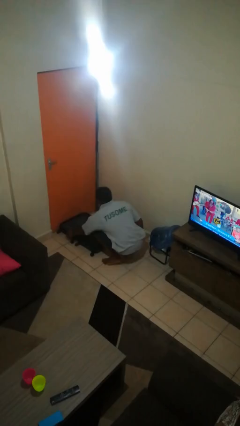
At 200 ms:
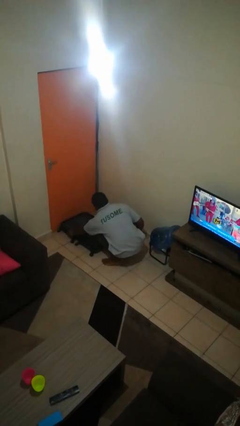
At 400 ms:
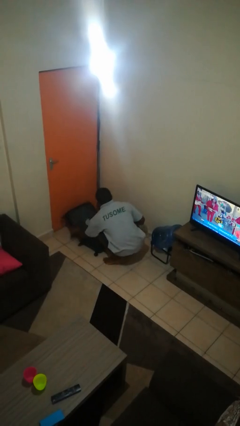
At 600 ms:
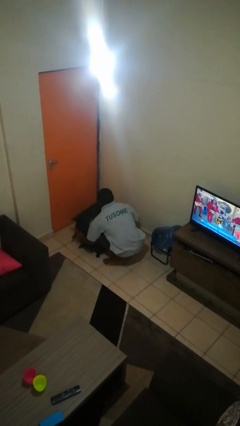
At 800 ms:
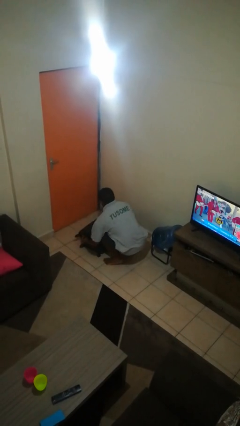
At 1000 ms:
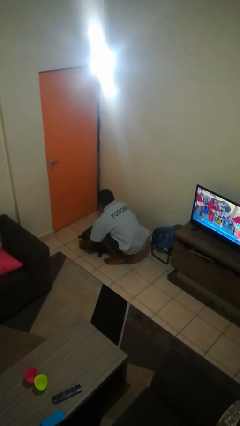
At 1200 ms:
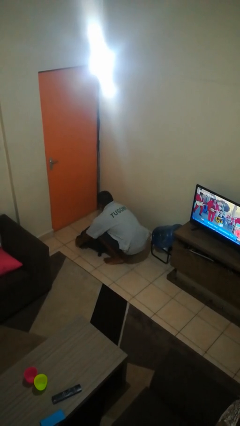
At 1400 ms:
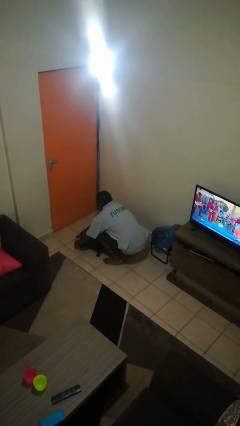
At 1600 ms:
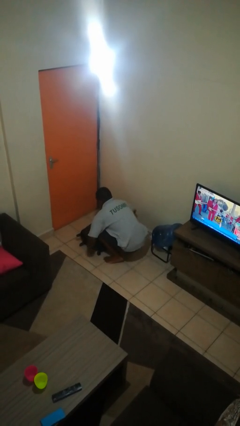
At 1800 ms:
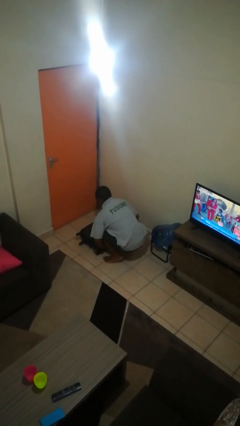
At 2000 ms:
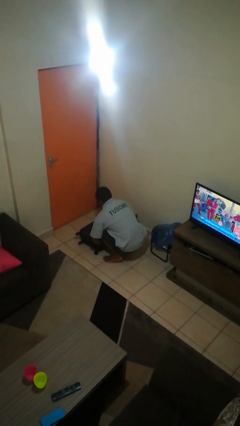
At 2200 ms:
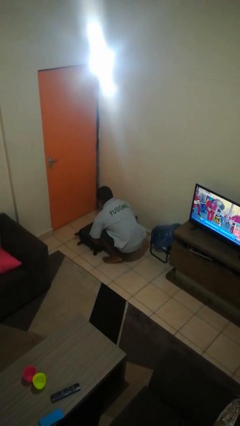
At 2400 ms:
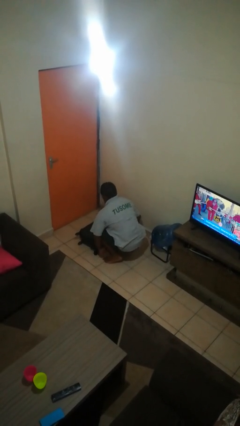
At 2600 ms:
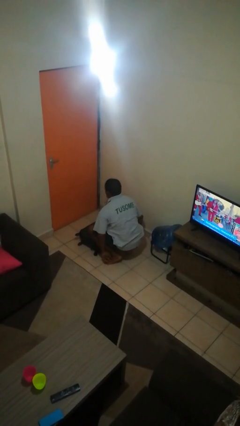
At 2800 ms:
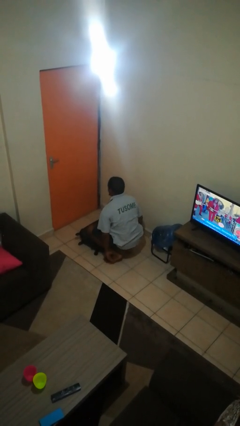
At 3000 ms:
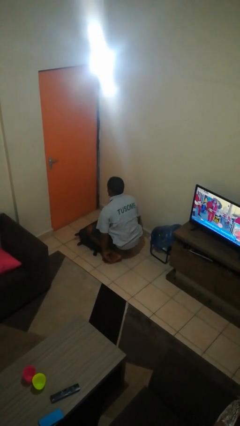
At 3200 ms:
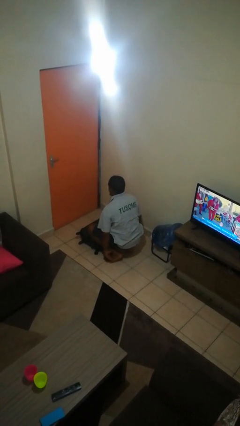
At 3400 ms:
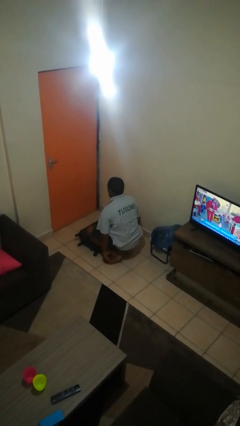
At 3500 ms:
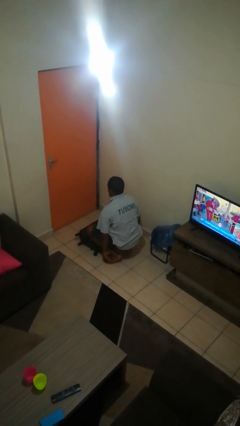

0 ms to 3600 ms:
person closes suitcase

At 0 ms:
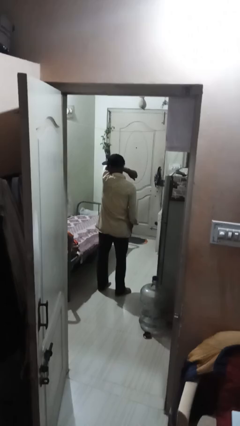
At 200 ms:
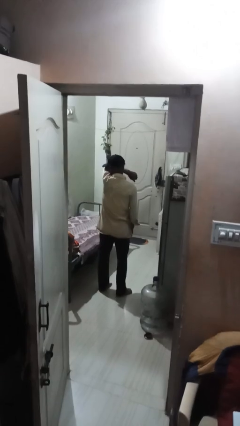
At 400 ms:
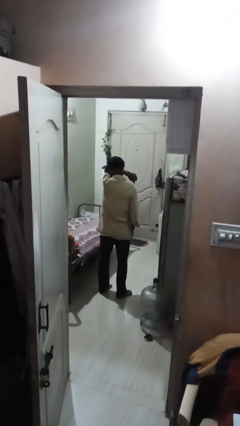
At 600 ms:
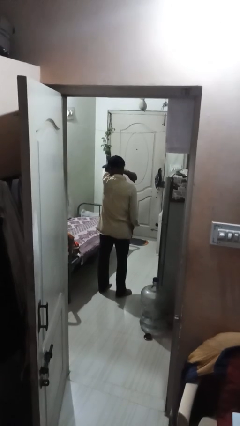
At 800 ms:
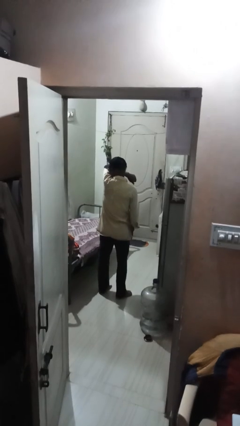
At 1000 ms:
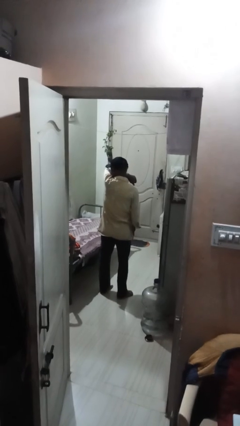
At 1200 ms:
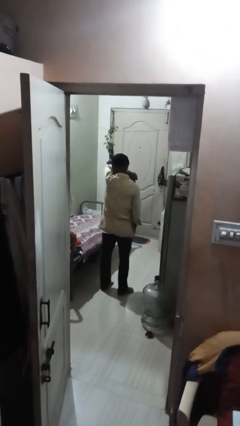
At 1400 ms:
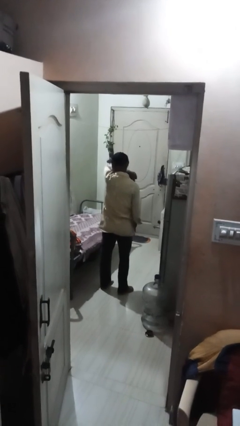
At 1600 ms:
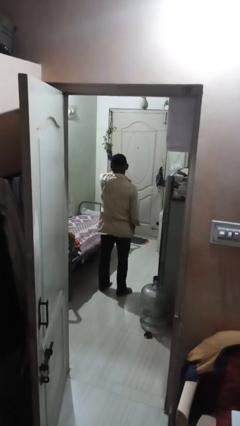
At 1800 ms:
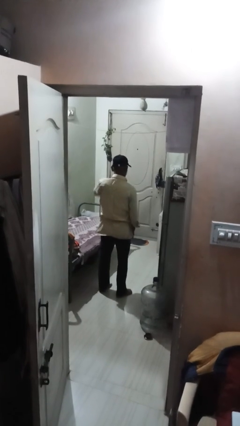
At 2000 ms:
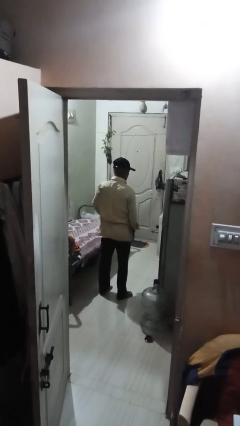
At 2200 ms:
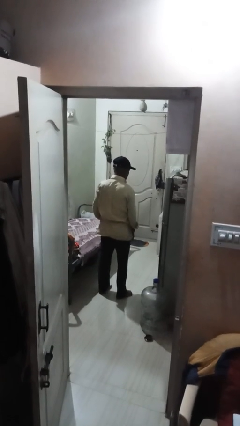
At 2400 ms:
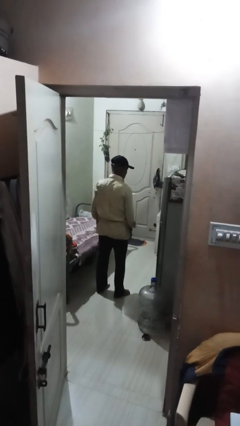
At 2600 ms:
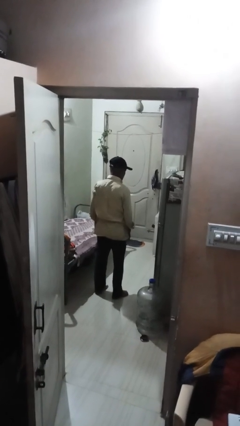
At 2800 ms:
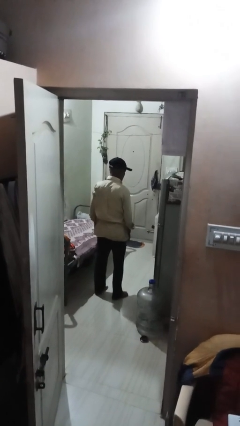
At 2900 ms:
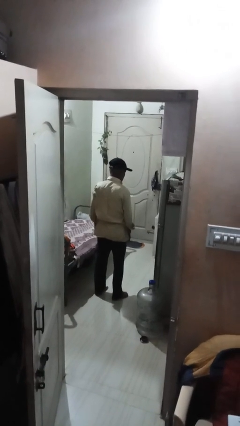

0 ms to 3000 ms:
person shrugs

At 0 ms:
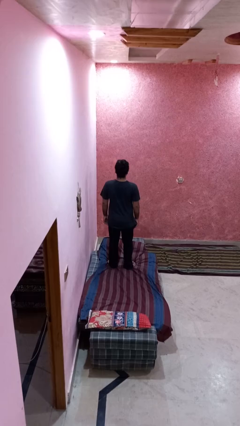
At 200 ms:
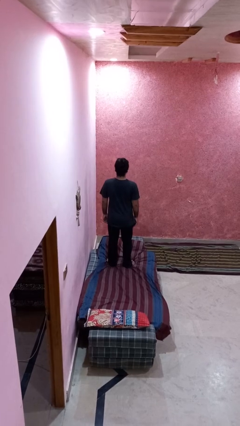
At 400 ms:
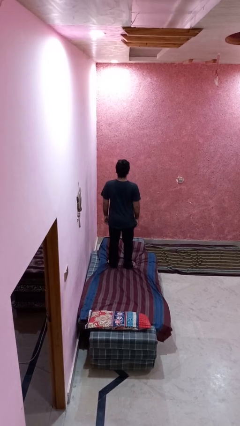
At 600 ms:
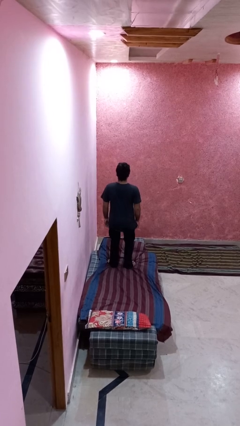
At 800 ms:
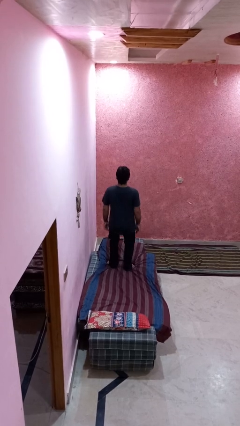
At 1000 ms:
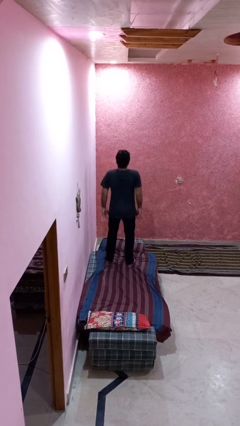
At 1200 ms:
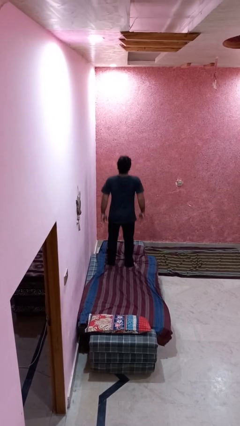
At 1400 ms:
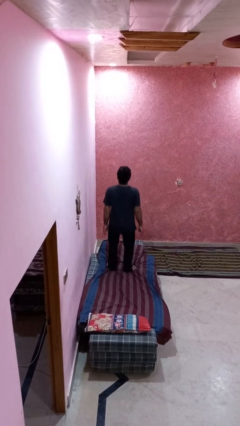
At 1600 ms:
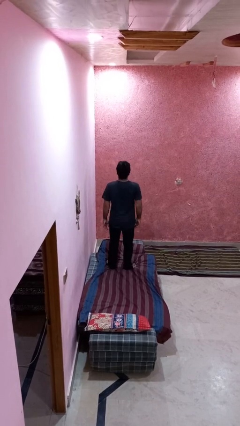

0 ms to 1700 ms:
person jumps on bed

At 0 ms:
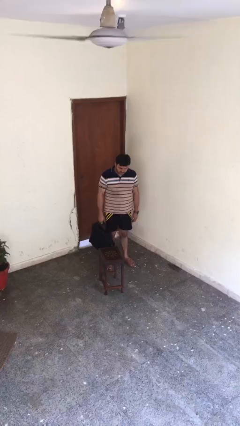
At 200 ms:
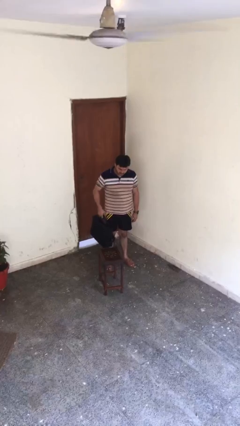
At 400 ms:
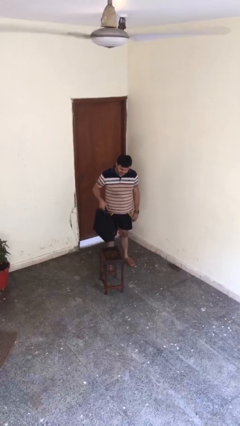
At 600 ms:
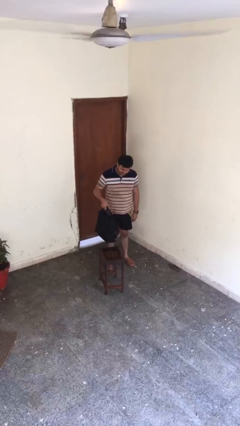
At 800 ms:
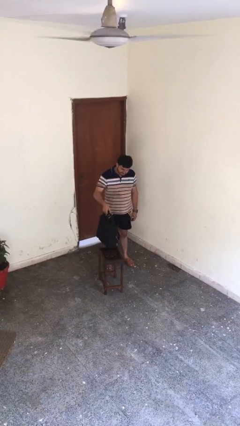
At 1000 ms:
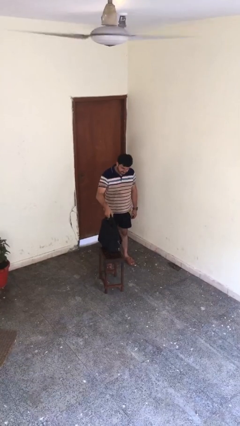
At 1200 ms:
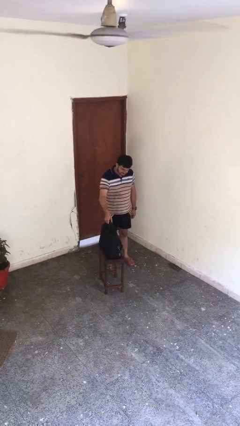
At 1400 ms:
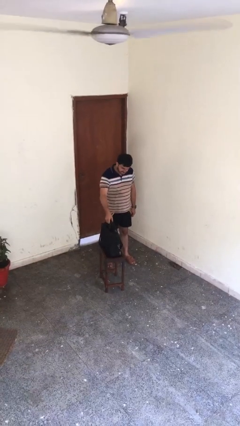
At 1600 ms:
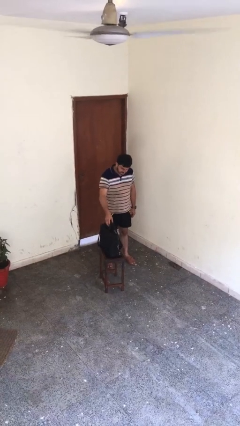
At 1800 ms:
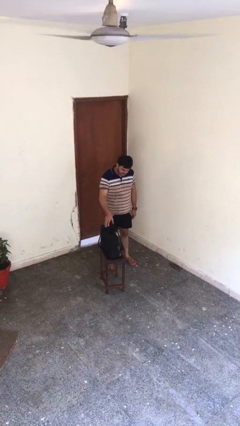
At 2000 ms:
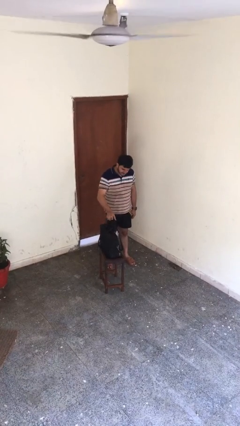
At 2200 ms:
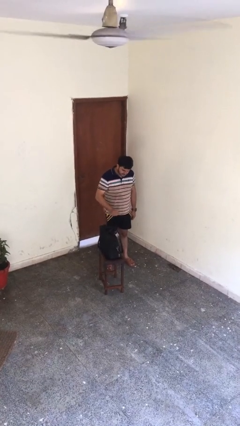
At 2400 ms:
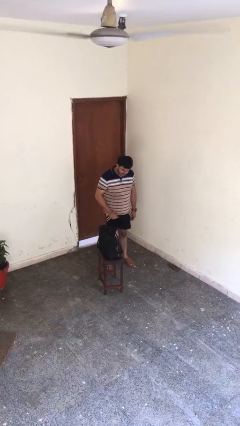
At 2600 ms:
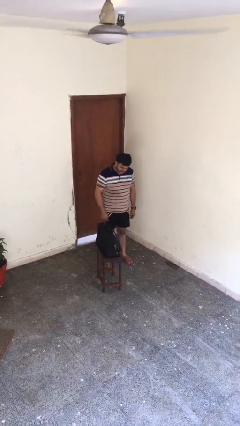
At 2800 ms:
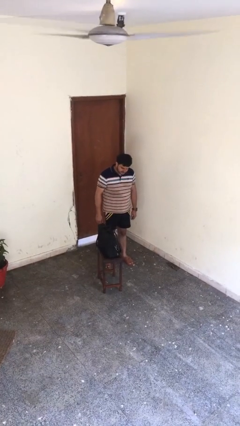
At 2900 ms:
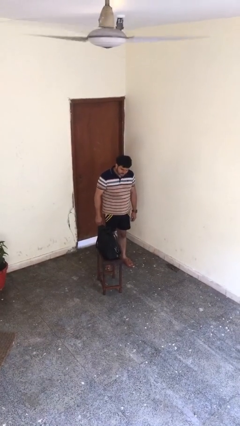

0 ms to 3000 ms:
person puts down object on table

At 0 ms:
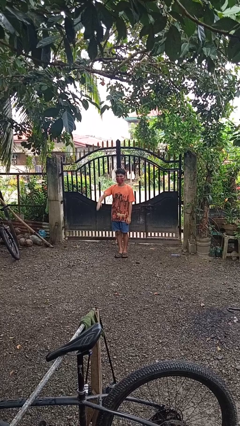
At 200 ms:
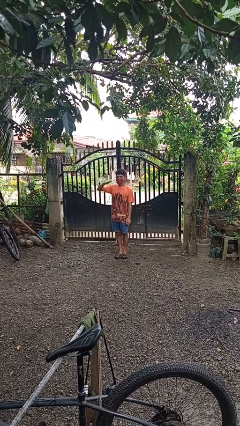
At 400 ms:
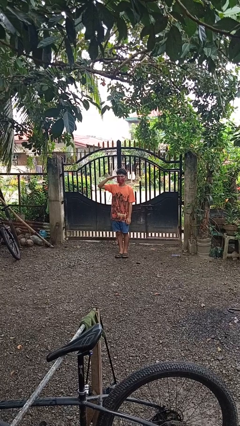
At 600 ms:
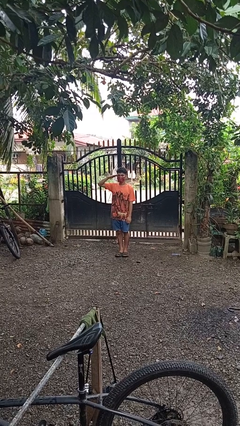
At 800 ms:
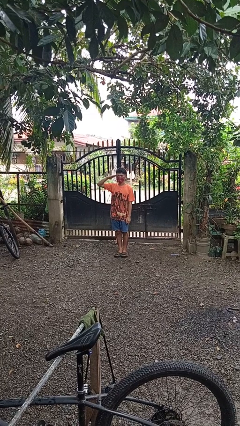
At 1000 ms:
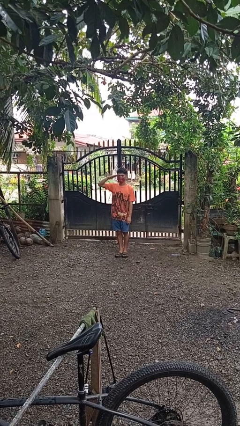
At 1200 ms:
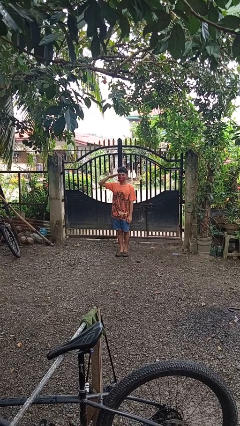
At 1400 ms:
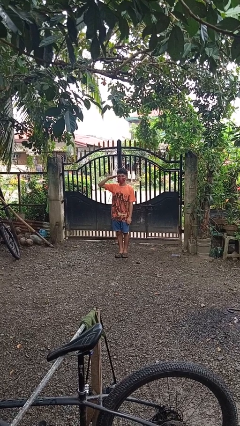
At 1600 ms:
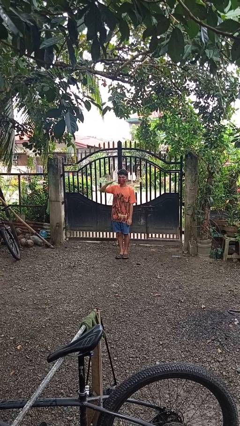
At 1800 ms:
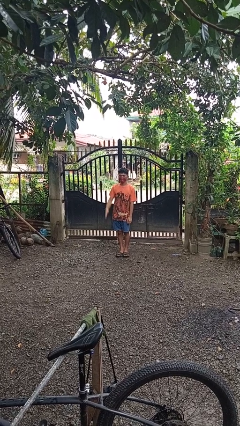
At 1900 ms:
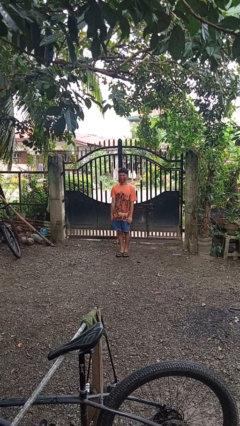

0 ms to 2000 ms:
person salutes

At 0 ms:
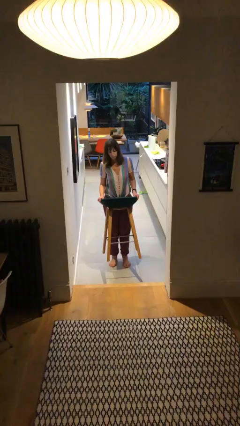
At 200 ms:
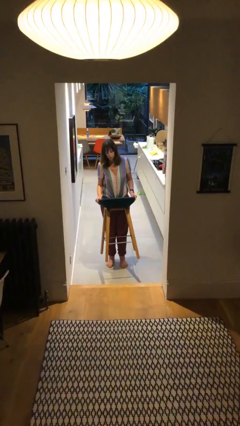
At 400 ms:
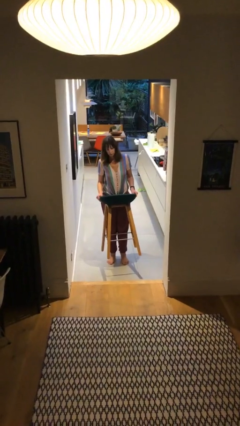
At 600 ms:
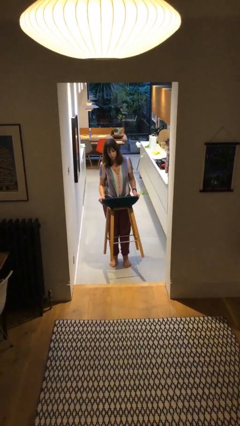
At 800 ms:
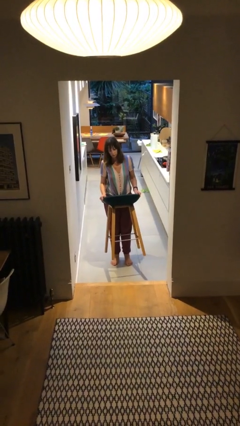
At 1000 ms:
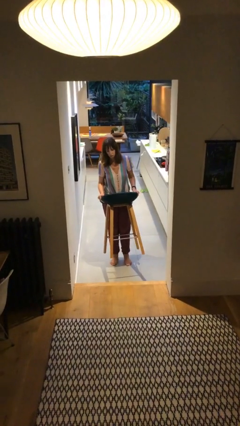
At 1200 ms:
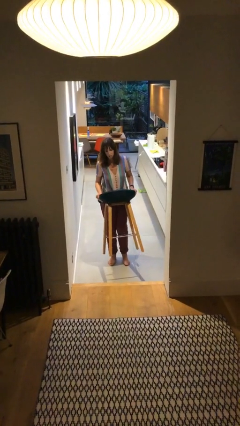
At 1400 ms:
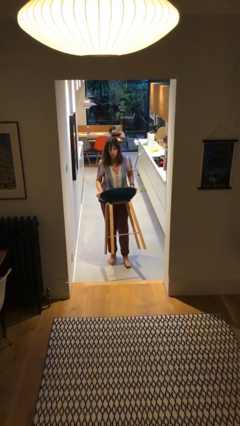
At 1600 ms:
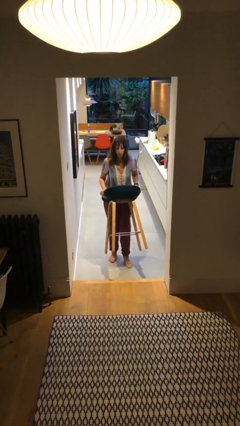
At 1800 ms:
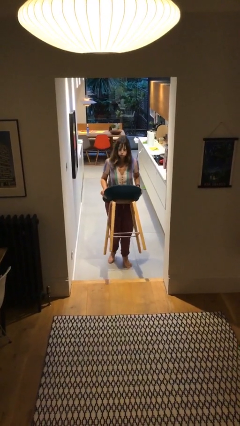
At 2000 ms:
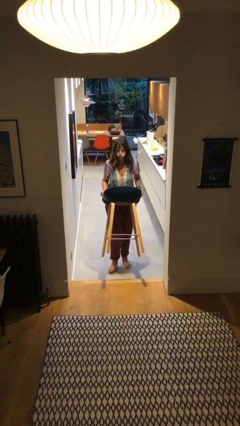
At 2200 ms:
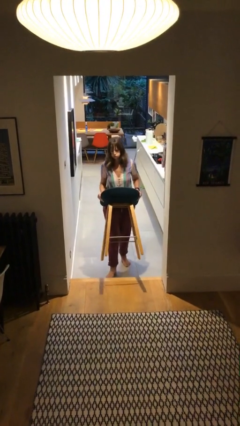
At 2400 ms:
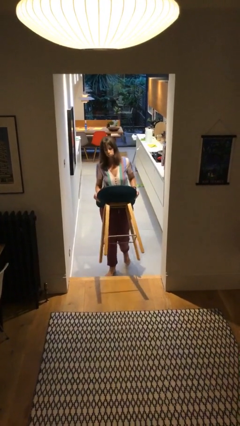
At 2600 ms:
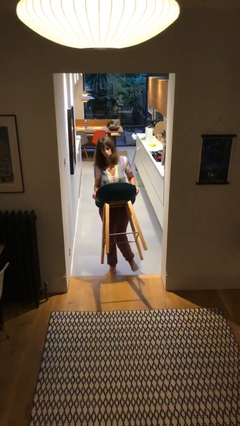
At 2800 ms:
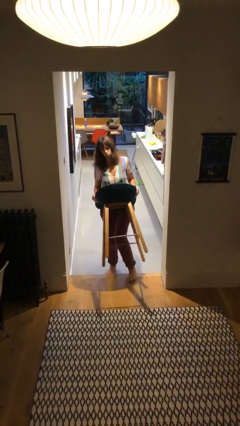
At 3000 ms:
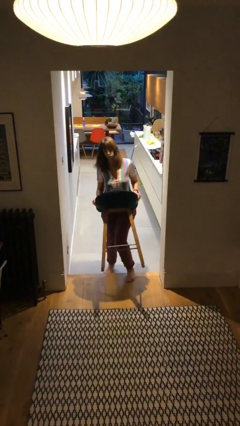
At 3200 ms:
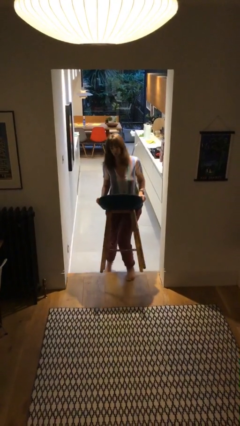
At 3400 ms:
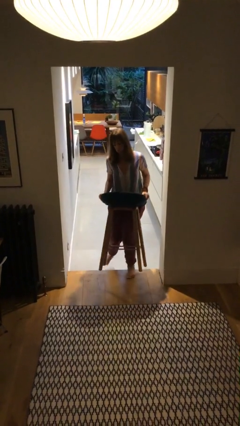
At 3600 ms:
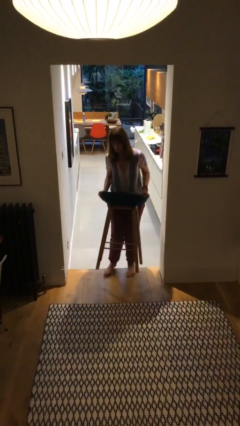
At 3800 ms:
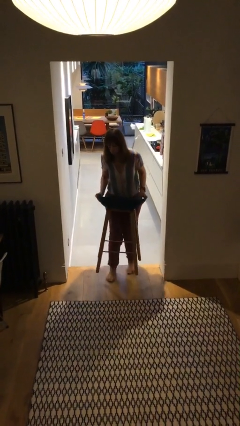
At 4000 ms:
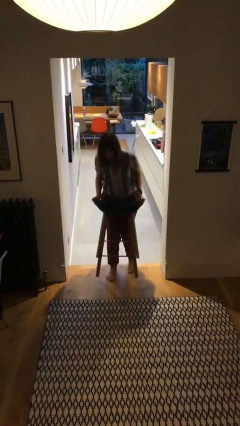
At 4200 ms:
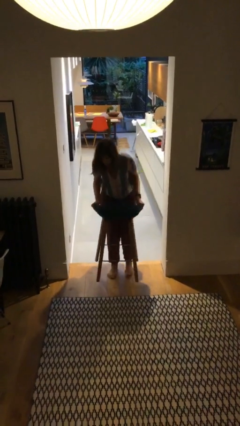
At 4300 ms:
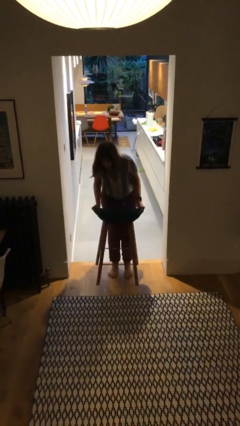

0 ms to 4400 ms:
person carries heavy object
